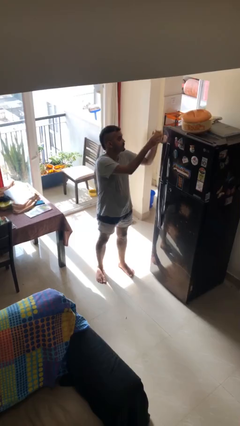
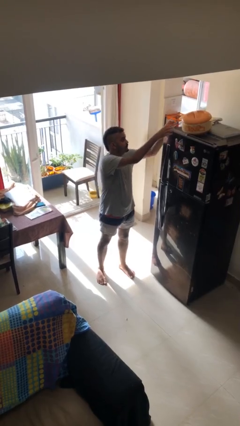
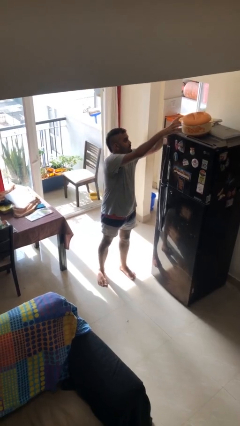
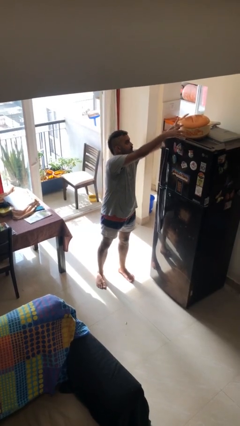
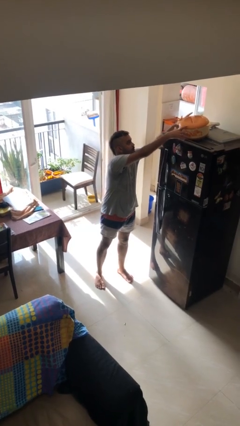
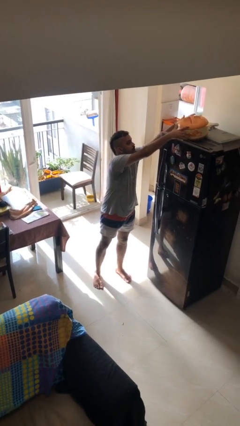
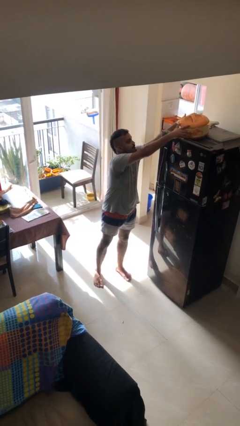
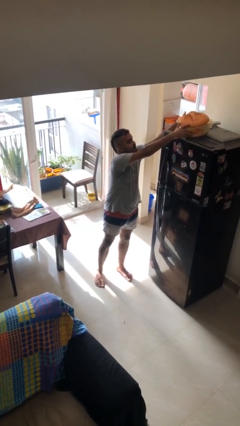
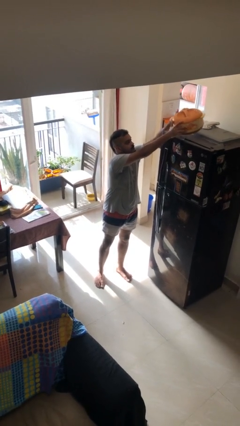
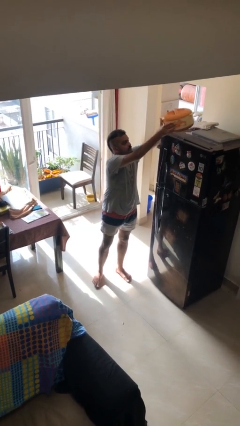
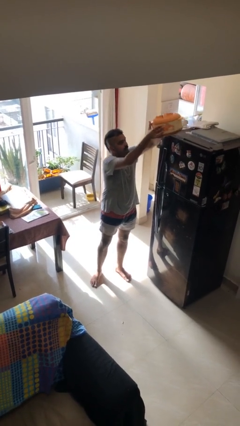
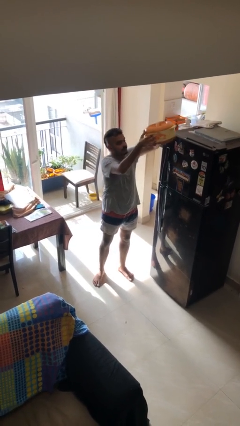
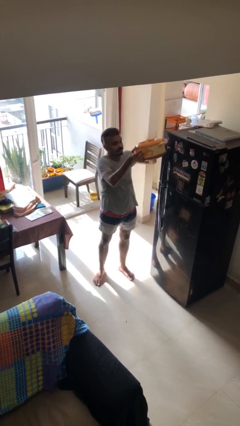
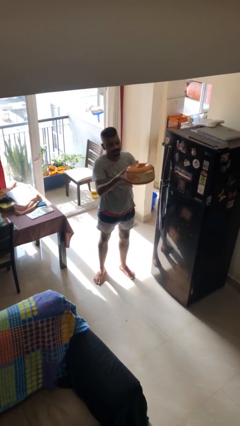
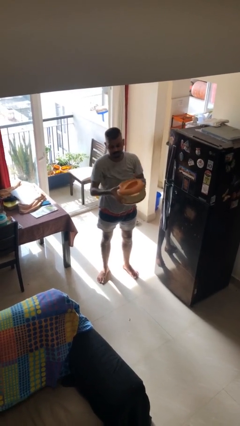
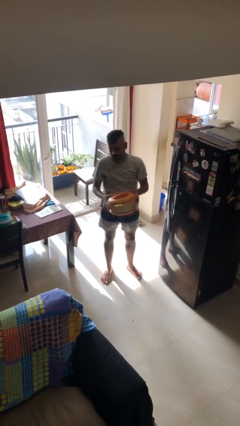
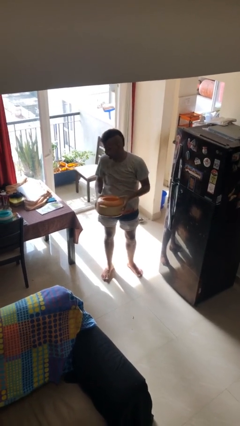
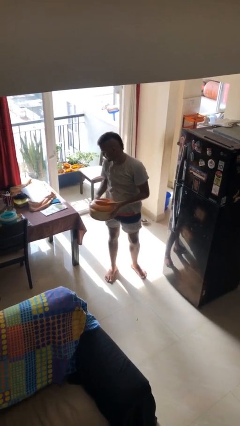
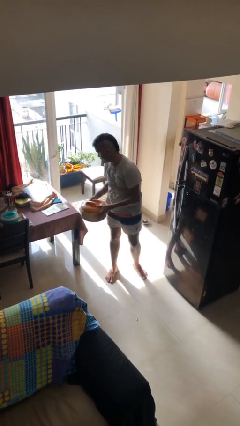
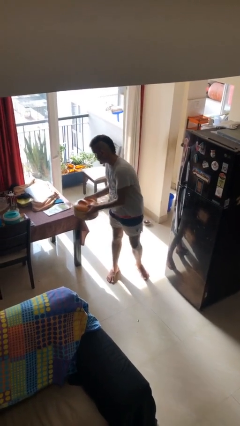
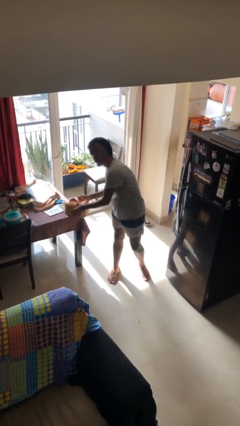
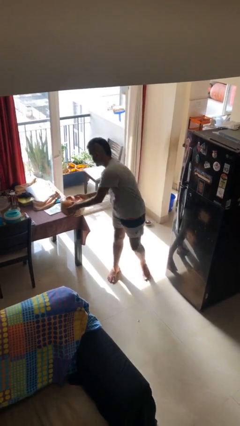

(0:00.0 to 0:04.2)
person picks up object from shelf

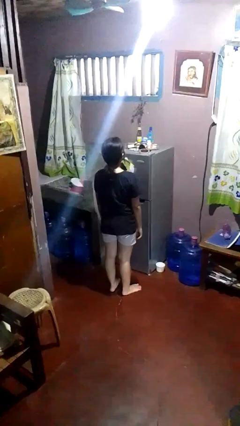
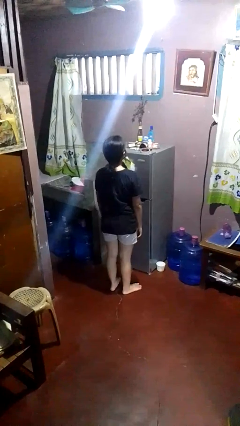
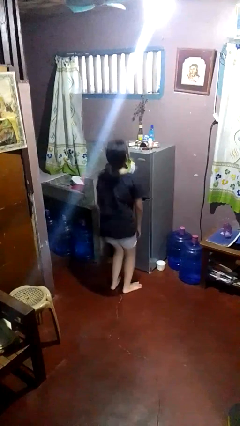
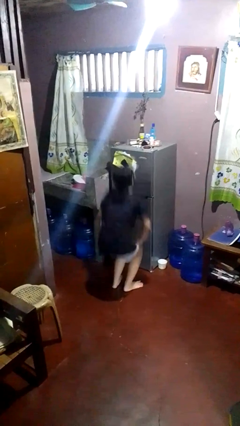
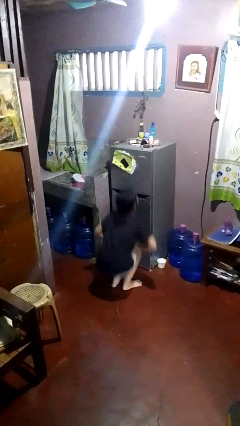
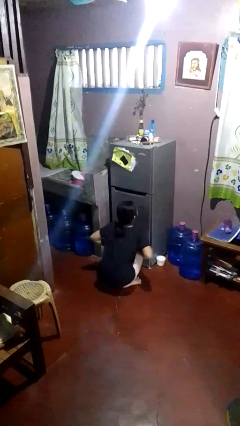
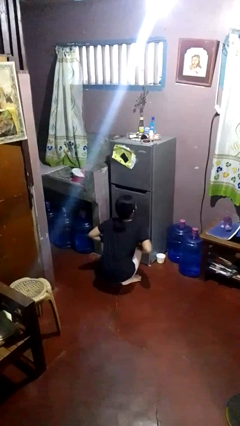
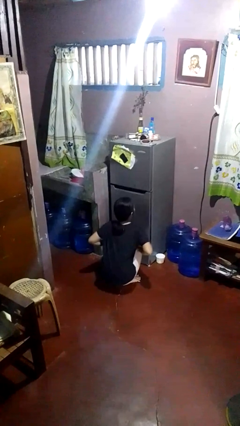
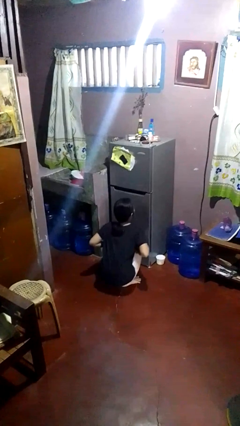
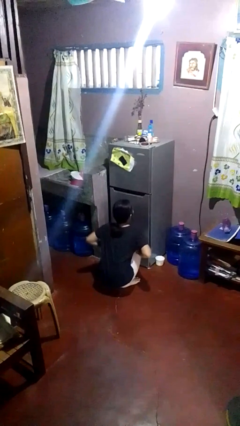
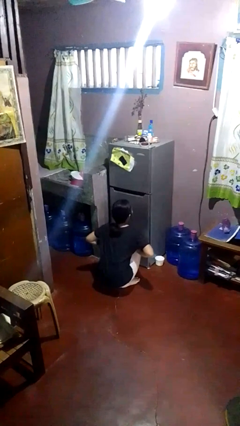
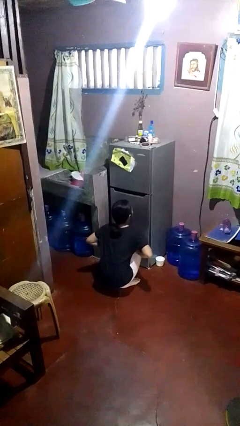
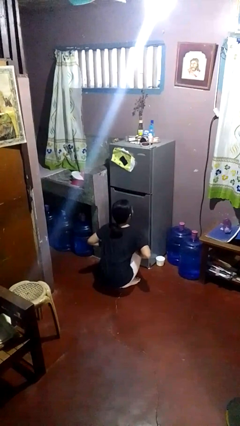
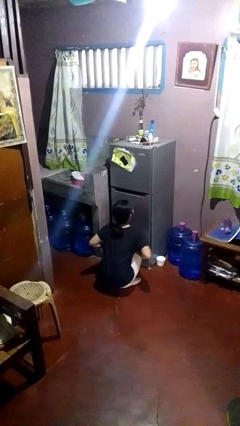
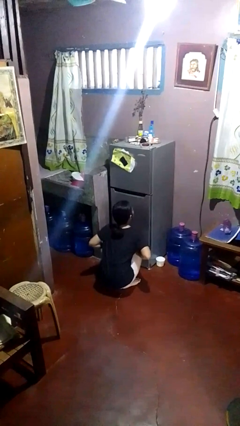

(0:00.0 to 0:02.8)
person squats

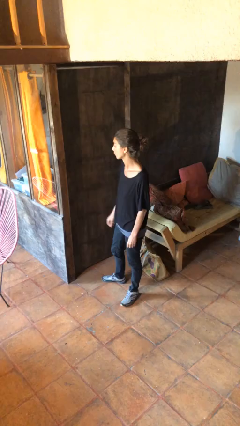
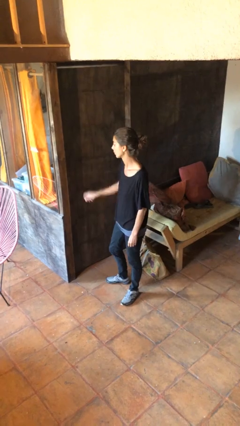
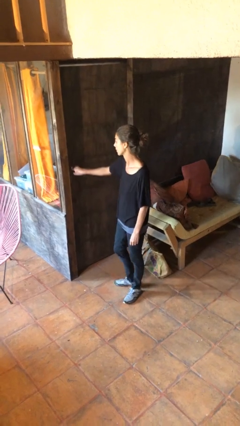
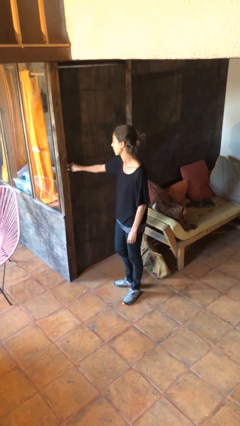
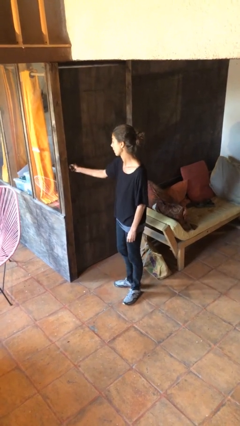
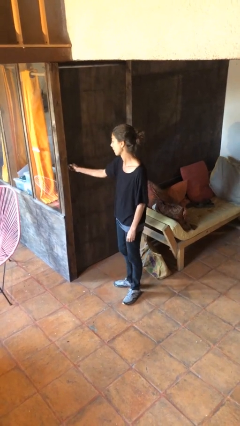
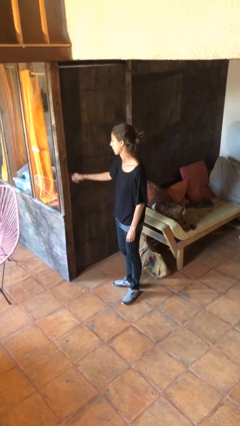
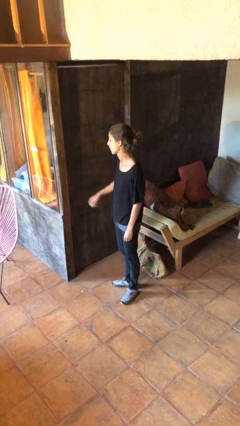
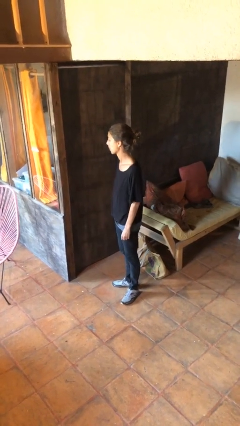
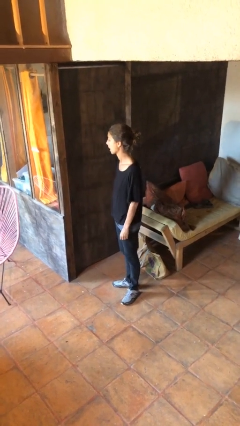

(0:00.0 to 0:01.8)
person unlocks door with keys

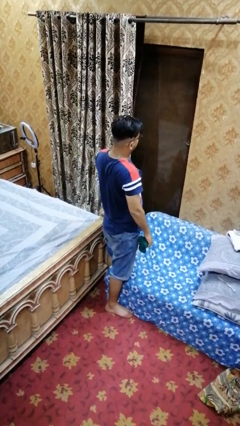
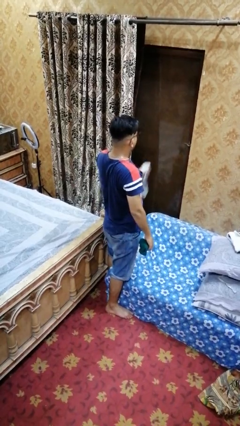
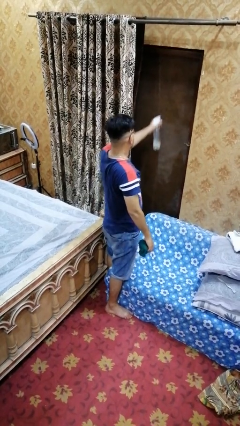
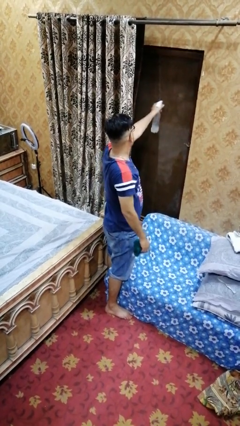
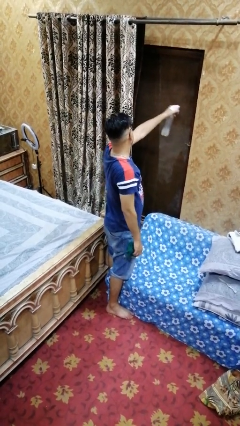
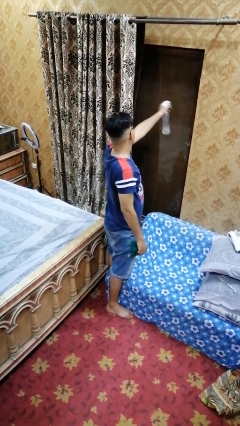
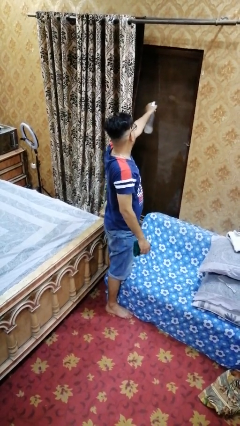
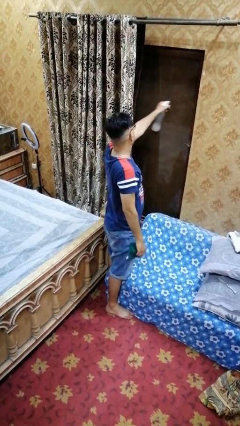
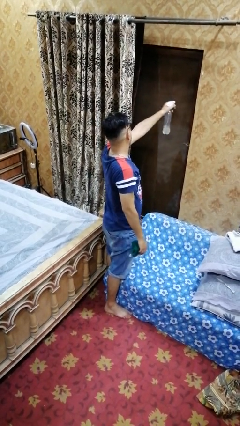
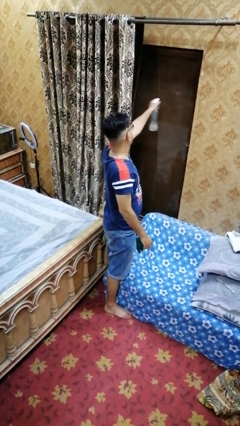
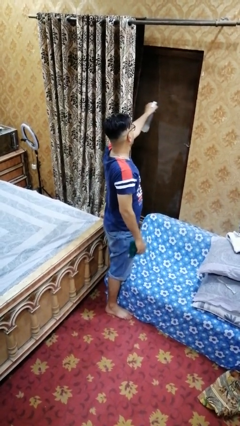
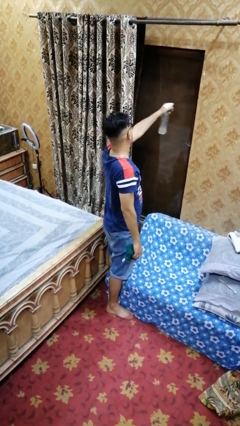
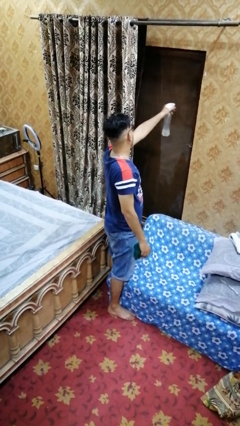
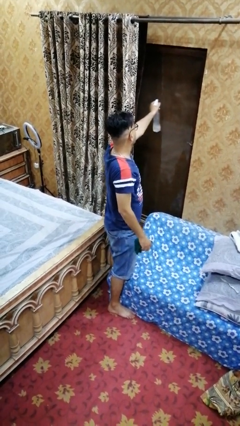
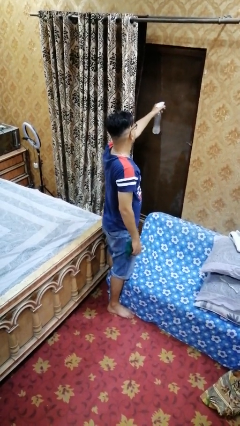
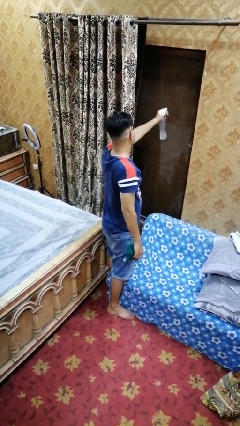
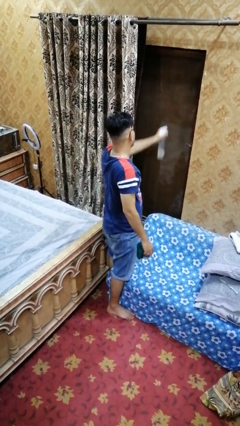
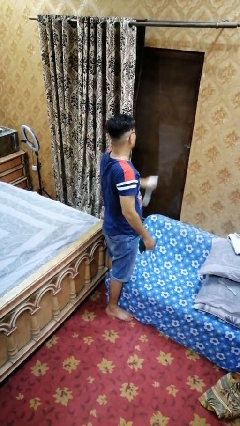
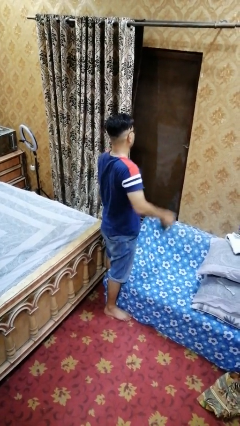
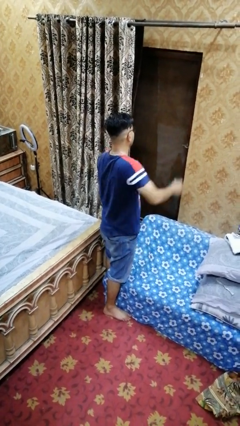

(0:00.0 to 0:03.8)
person sprays from bottle

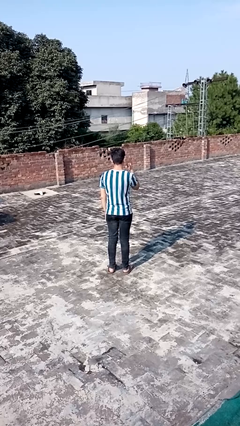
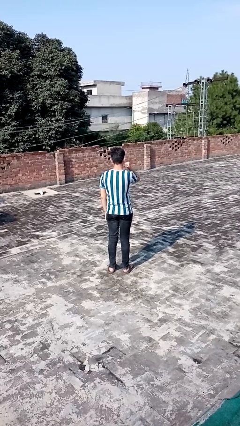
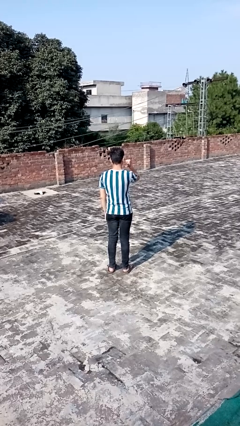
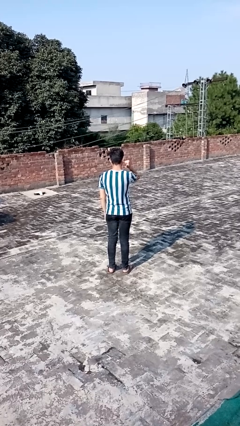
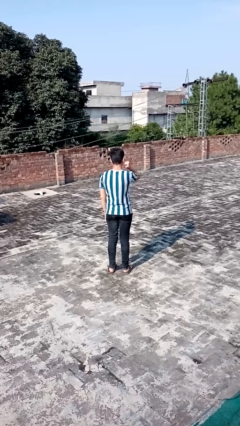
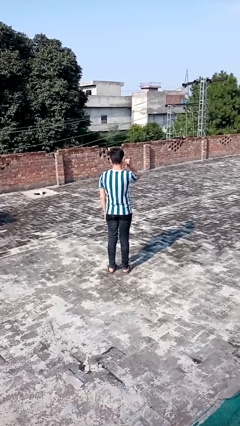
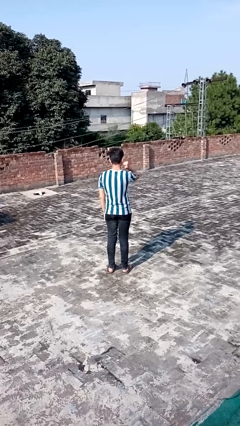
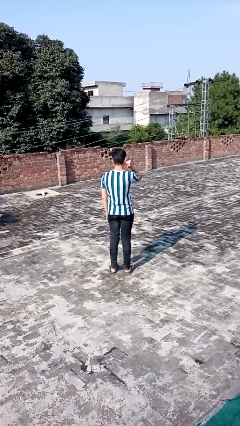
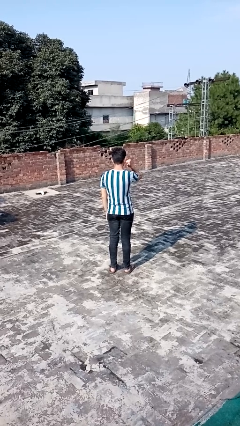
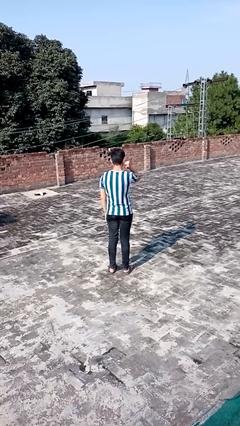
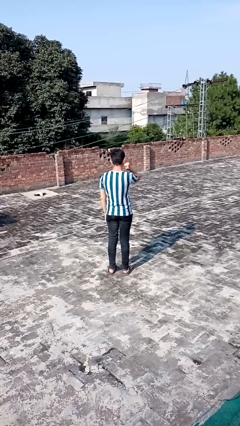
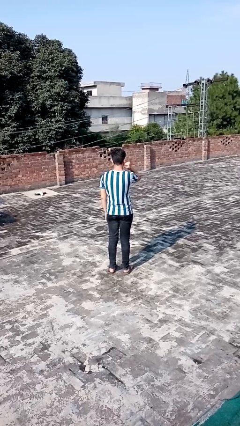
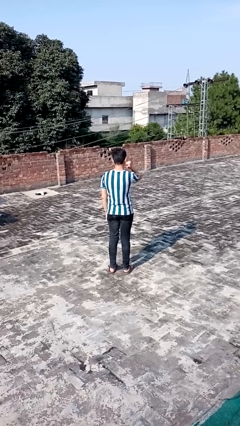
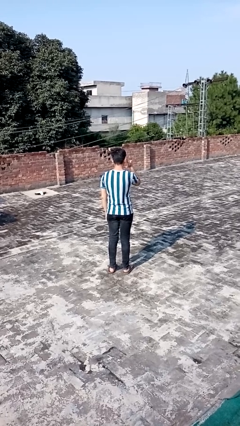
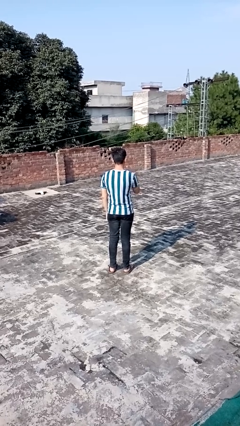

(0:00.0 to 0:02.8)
person gestures behind me

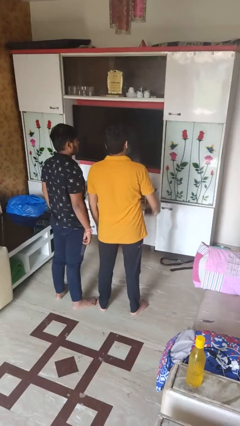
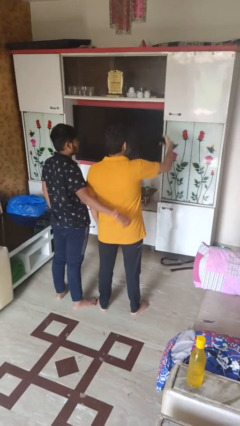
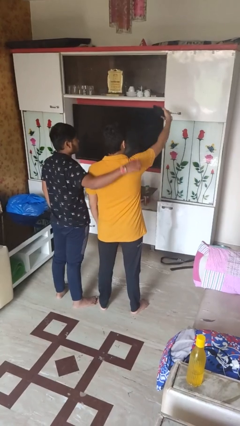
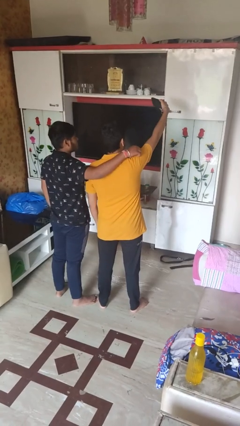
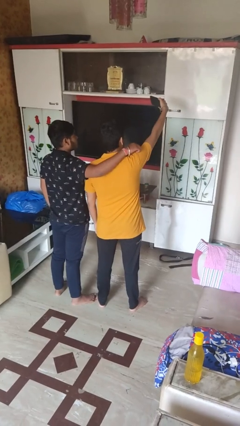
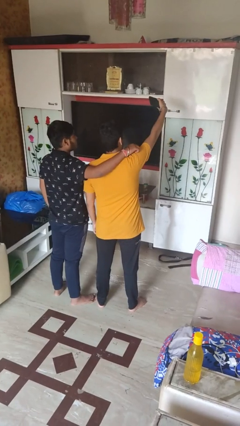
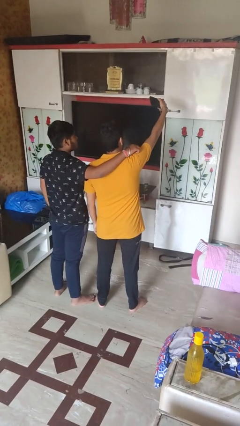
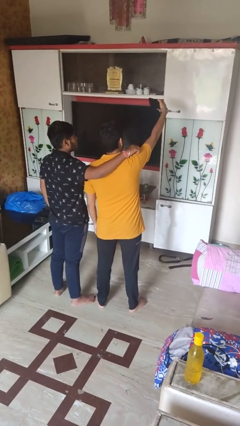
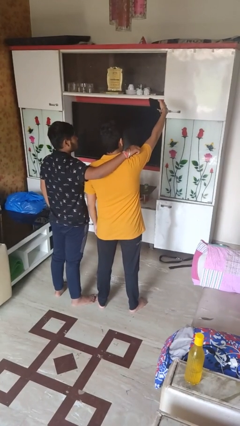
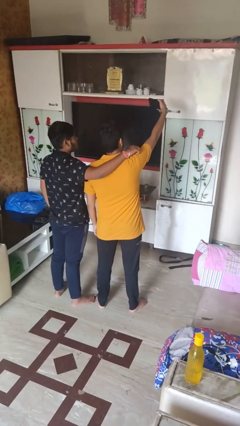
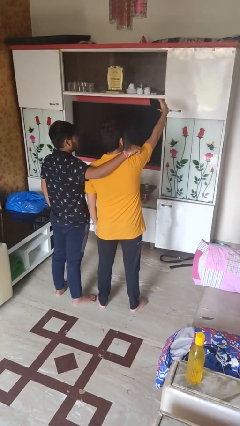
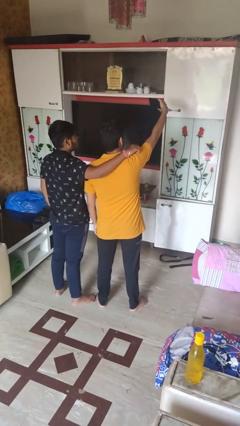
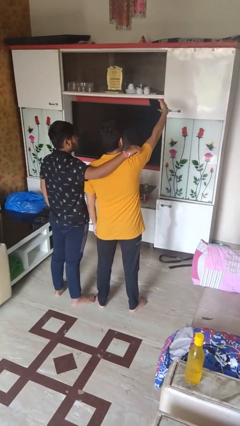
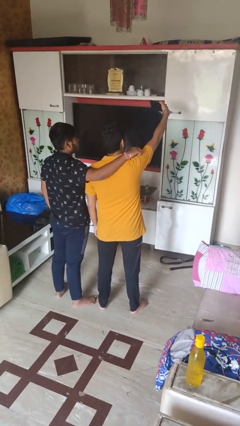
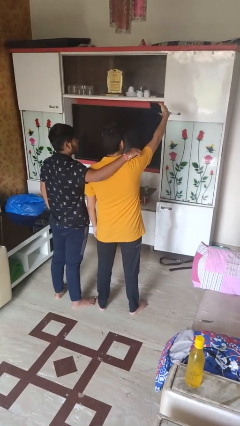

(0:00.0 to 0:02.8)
person takes selfie with person
